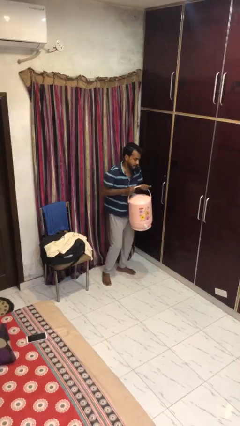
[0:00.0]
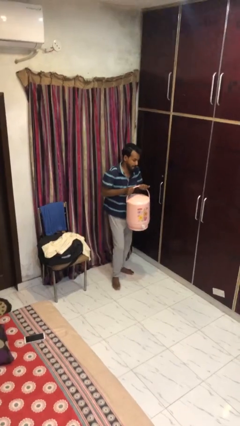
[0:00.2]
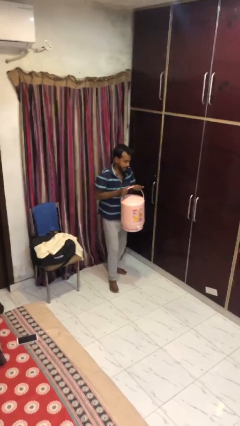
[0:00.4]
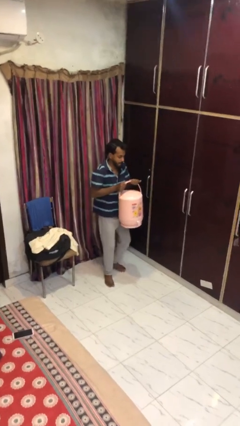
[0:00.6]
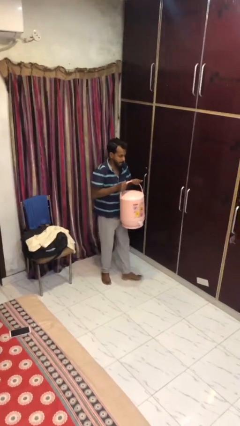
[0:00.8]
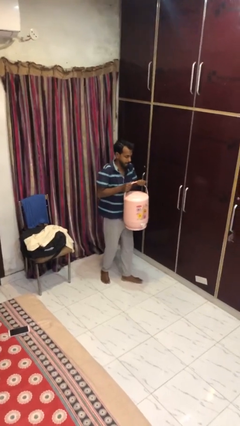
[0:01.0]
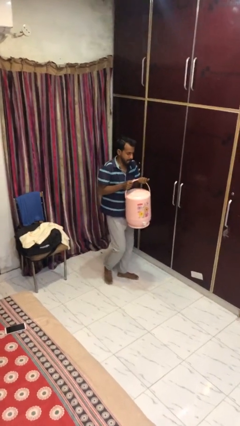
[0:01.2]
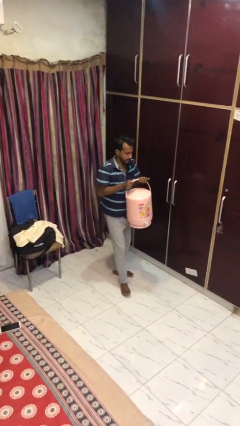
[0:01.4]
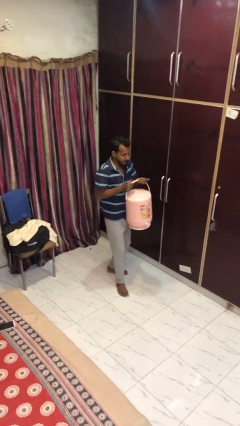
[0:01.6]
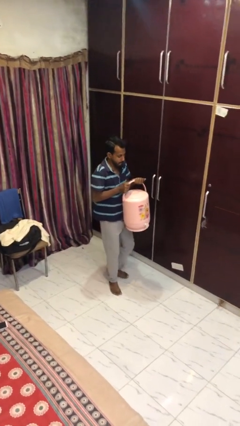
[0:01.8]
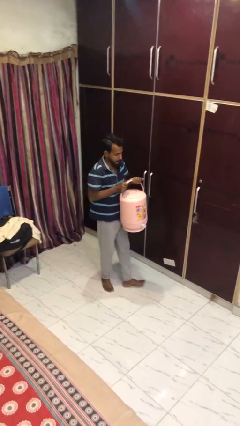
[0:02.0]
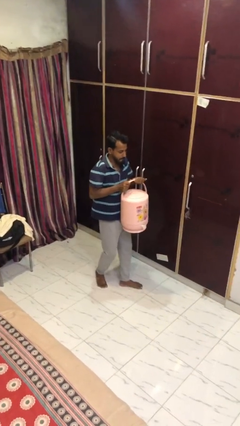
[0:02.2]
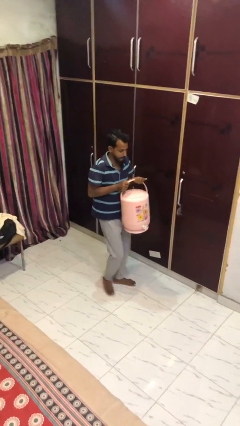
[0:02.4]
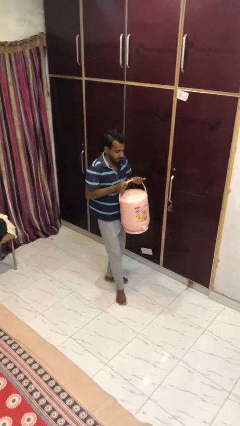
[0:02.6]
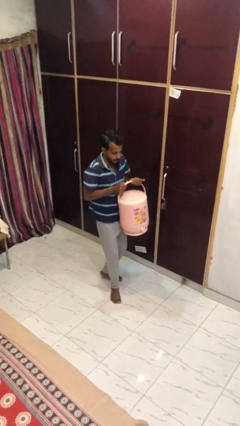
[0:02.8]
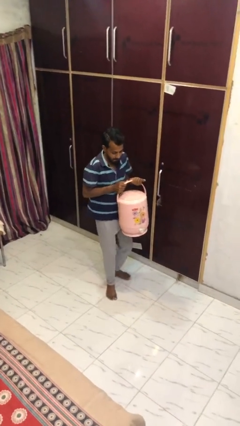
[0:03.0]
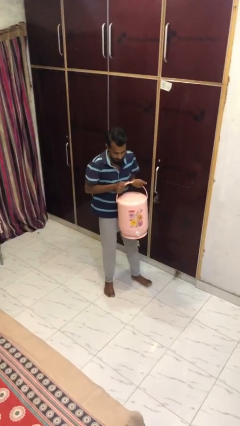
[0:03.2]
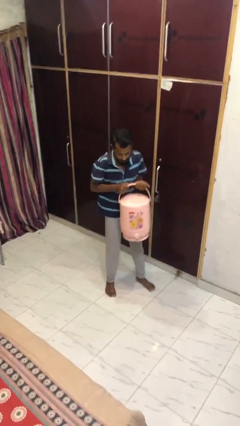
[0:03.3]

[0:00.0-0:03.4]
person carries heavy object

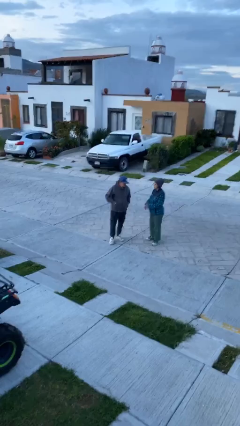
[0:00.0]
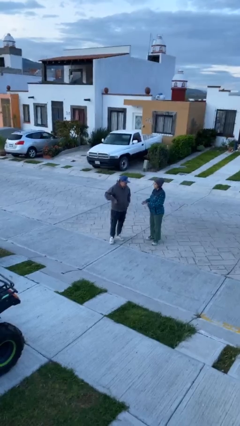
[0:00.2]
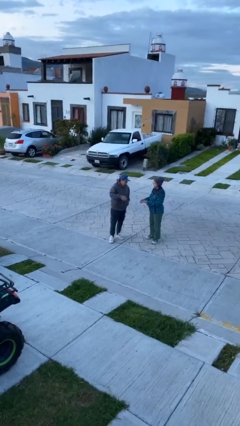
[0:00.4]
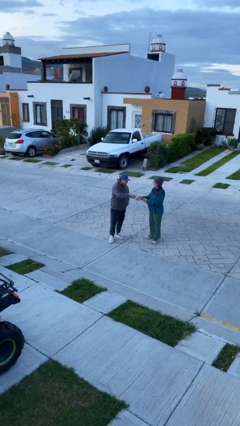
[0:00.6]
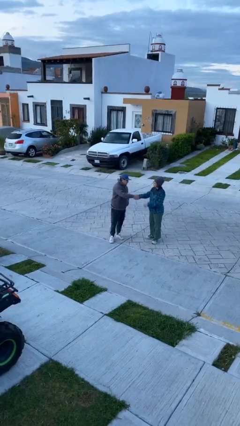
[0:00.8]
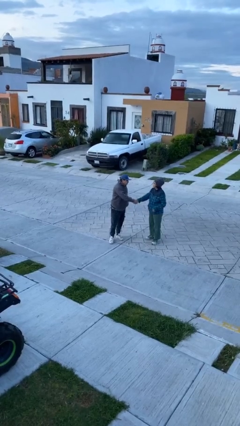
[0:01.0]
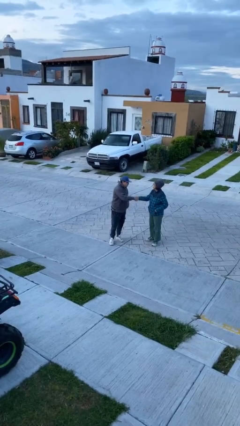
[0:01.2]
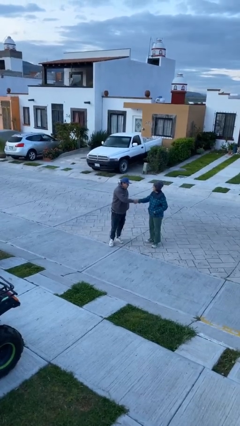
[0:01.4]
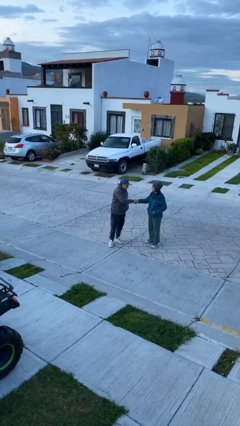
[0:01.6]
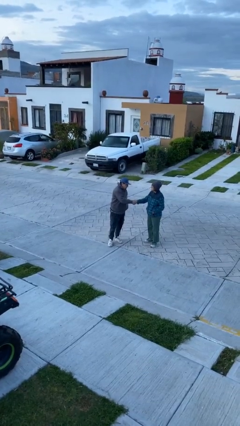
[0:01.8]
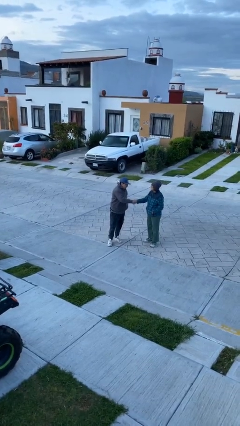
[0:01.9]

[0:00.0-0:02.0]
person shakes hand

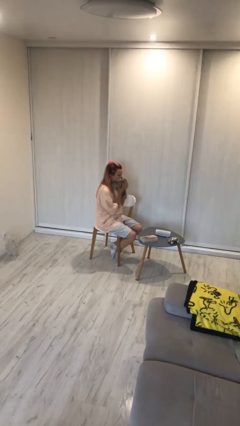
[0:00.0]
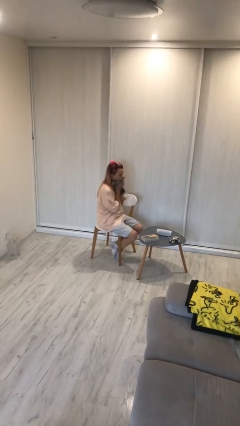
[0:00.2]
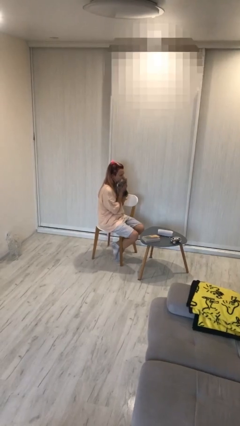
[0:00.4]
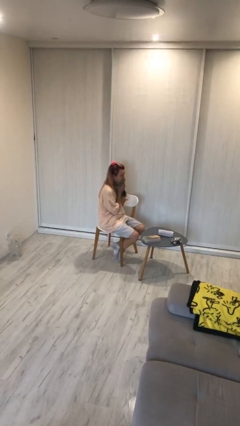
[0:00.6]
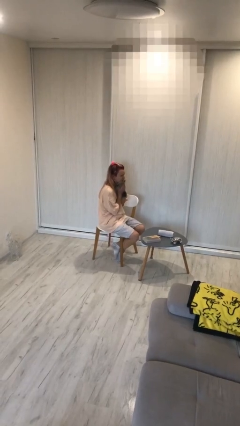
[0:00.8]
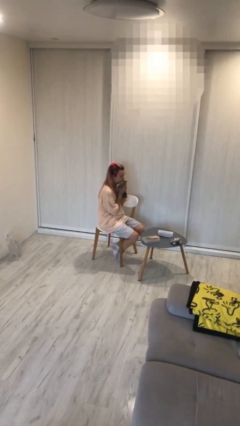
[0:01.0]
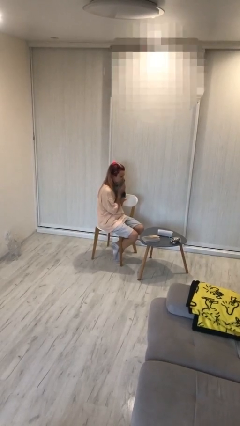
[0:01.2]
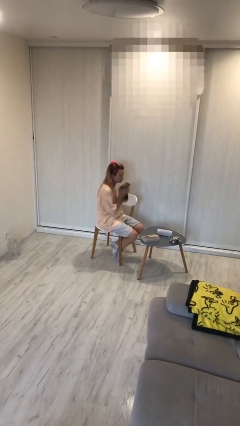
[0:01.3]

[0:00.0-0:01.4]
person wipes mouth with napkin

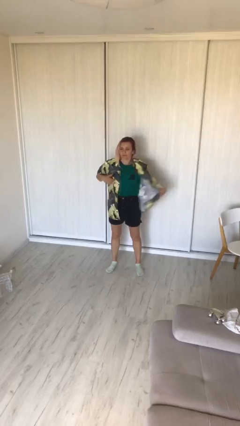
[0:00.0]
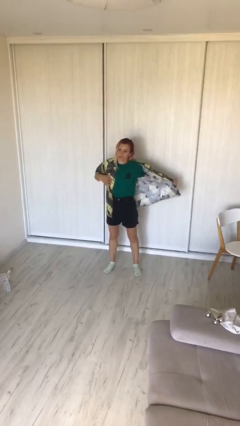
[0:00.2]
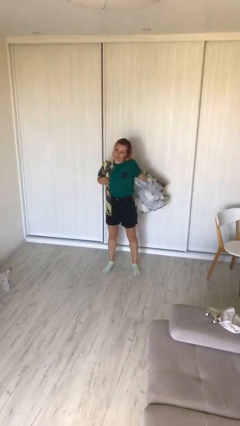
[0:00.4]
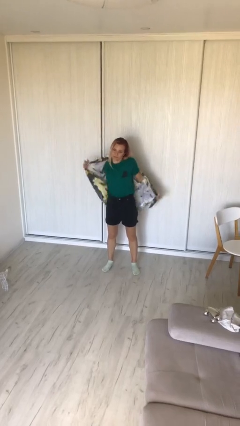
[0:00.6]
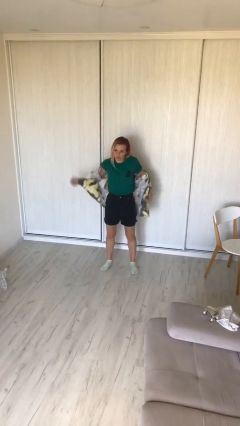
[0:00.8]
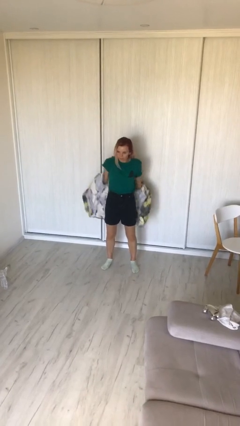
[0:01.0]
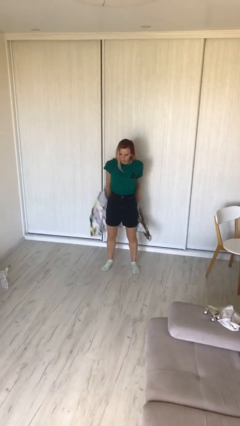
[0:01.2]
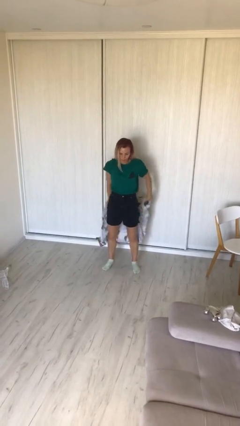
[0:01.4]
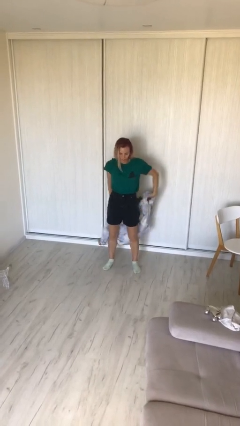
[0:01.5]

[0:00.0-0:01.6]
person takes off shirt

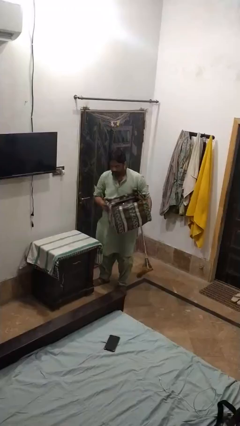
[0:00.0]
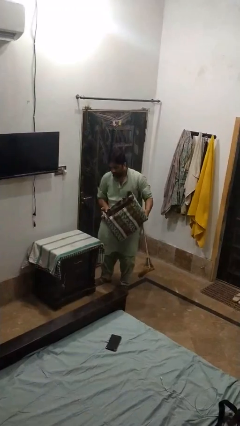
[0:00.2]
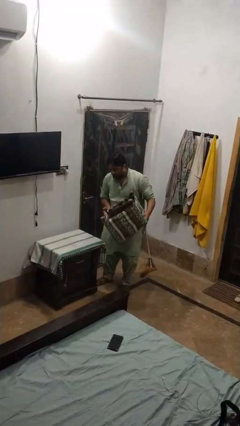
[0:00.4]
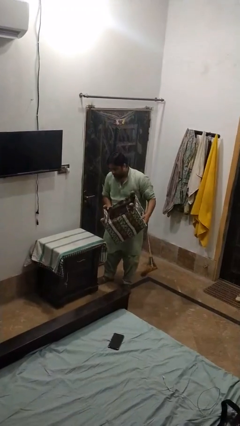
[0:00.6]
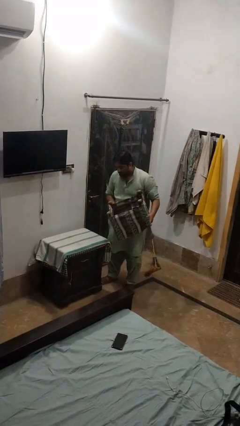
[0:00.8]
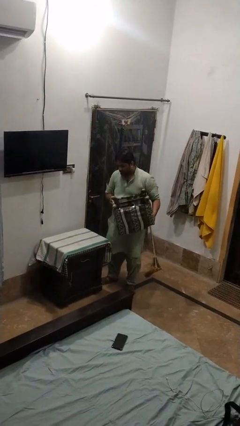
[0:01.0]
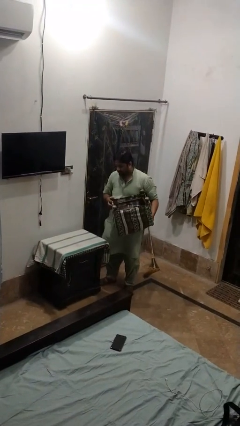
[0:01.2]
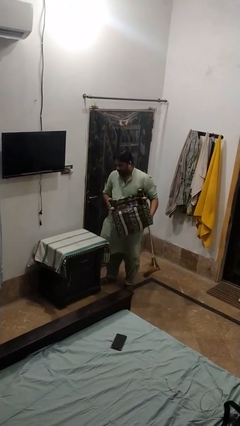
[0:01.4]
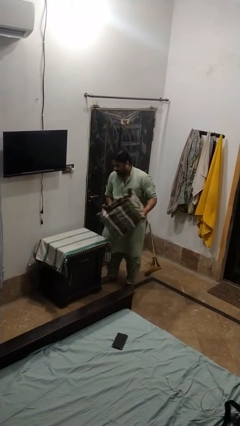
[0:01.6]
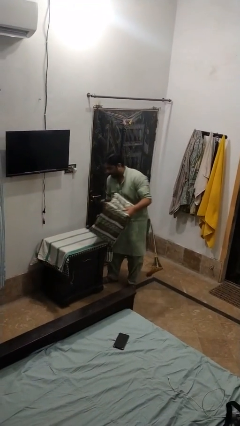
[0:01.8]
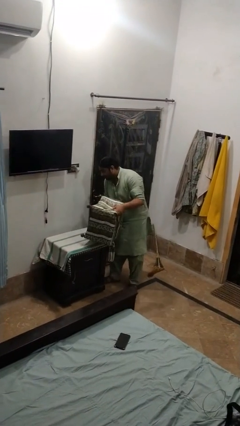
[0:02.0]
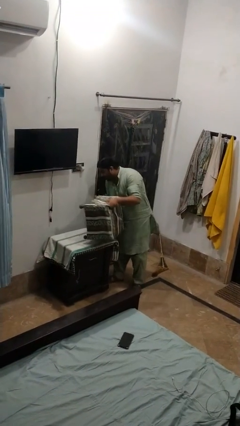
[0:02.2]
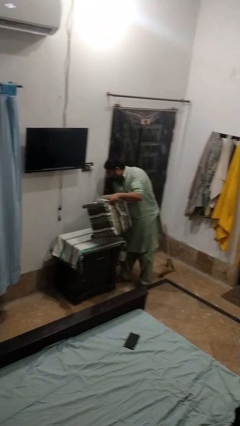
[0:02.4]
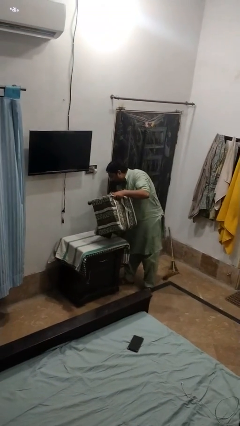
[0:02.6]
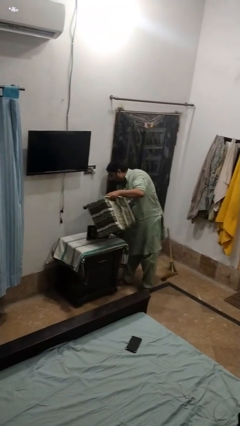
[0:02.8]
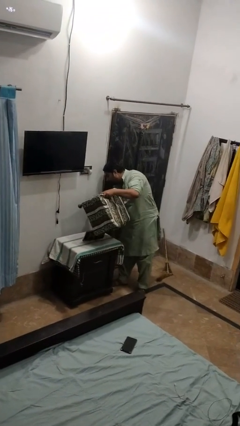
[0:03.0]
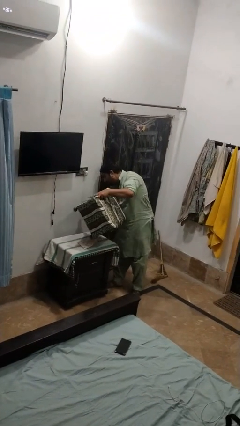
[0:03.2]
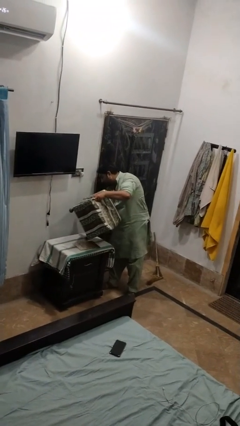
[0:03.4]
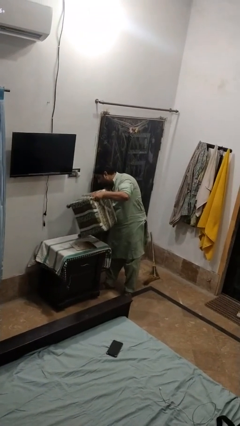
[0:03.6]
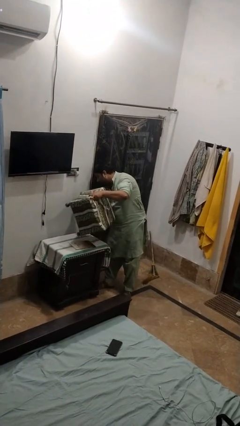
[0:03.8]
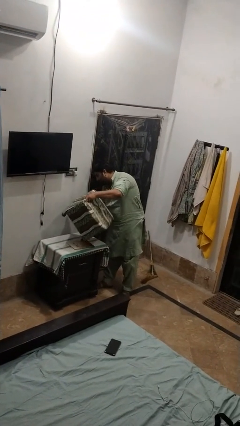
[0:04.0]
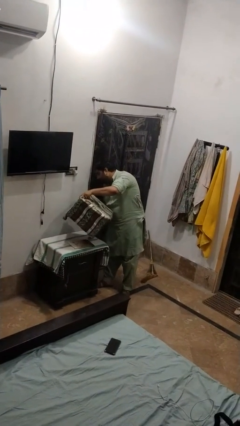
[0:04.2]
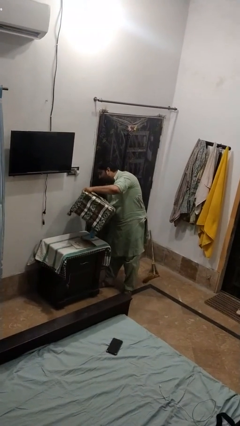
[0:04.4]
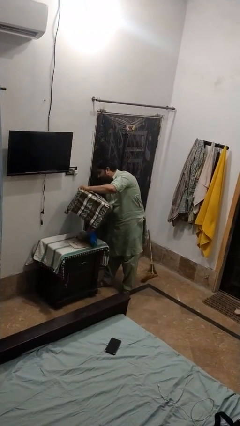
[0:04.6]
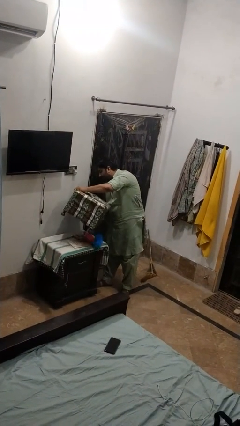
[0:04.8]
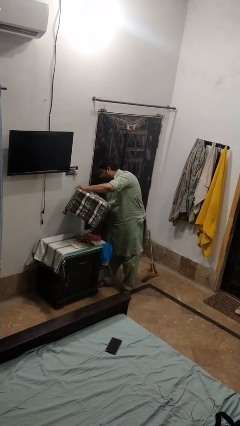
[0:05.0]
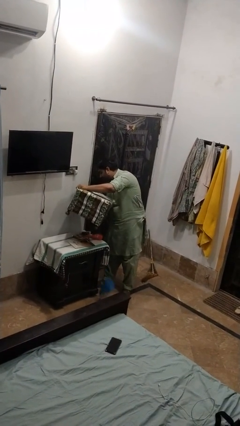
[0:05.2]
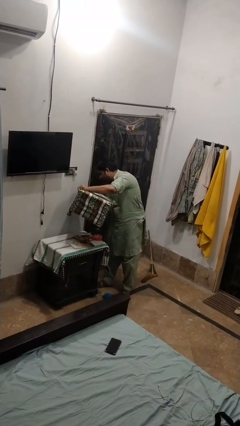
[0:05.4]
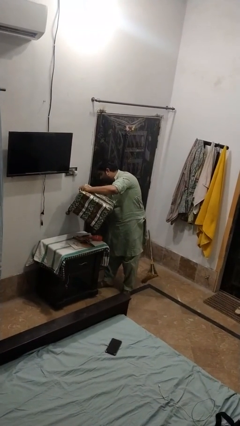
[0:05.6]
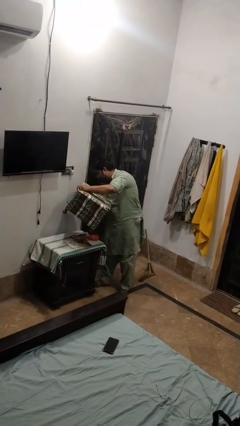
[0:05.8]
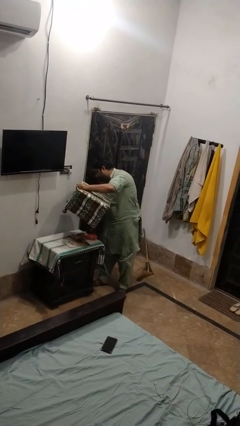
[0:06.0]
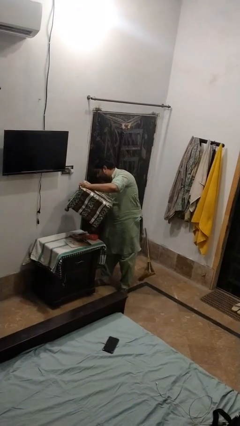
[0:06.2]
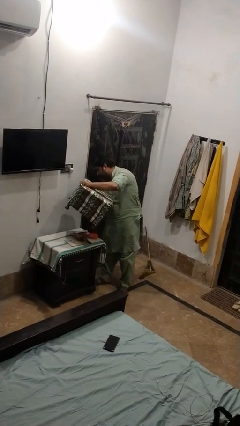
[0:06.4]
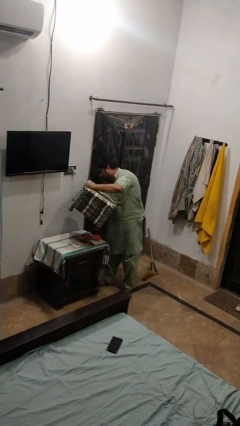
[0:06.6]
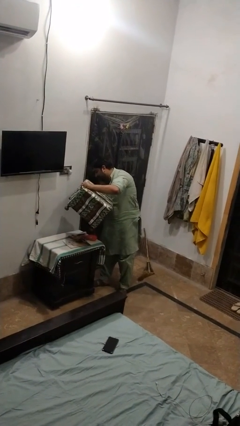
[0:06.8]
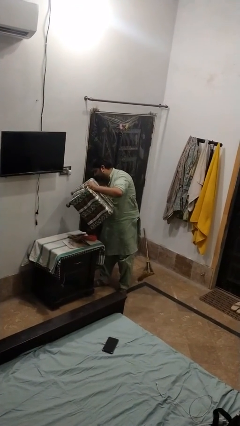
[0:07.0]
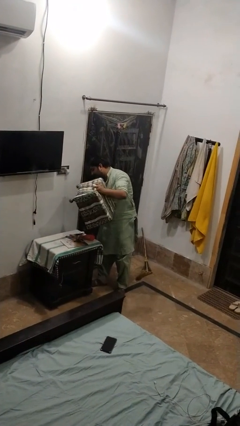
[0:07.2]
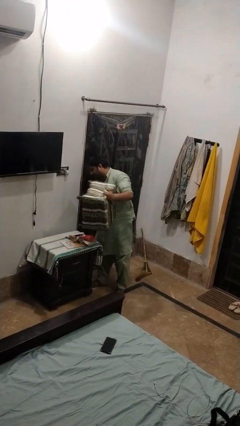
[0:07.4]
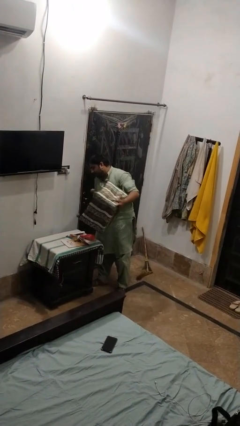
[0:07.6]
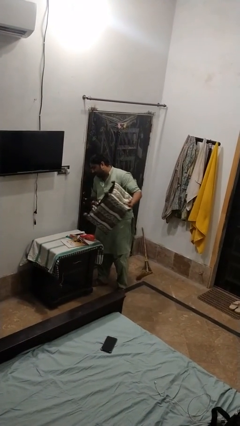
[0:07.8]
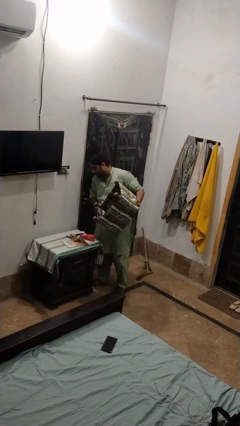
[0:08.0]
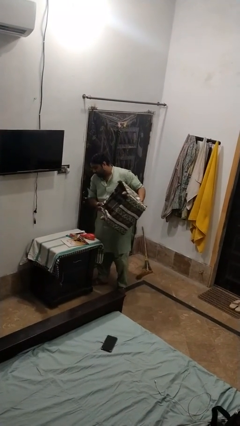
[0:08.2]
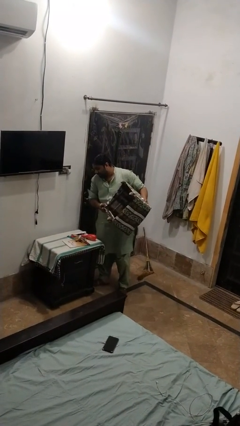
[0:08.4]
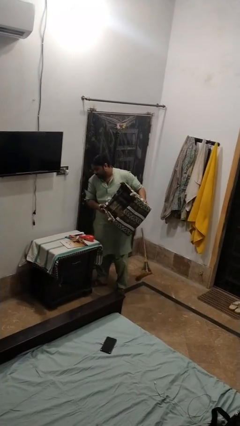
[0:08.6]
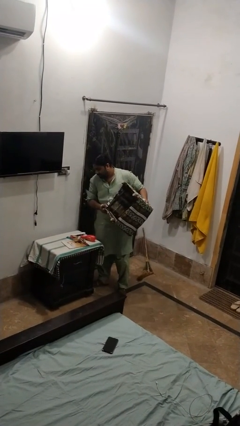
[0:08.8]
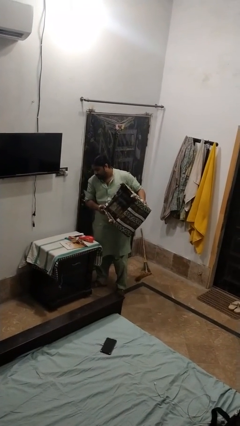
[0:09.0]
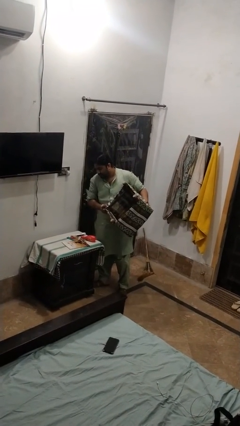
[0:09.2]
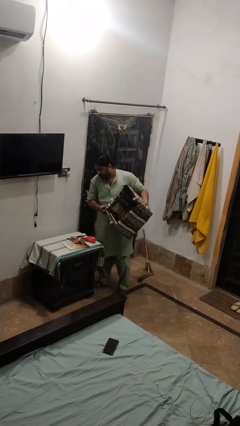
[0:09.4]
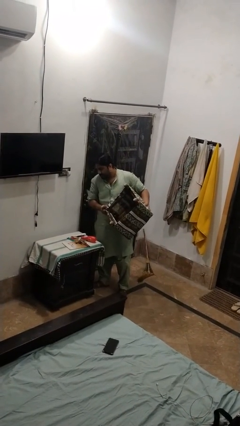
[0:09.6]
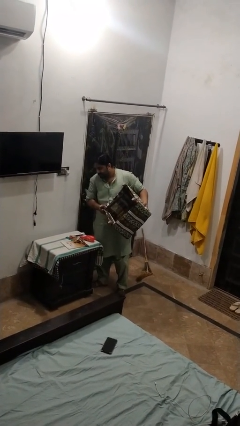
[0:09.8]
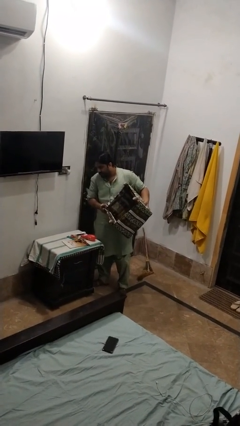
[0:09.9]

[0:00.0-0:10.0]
person unloads box onto table
